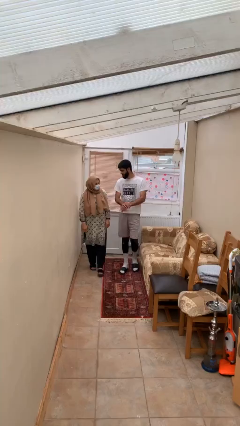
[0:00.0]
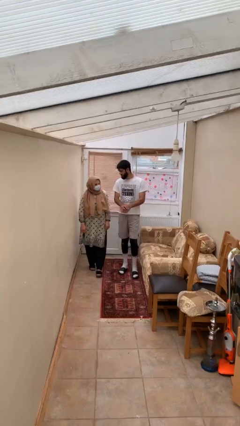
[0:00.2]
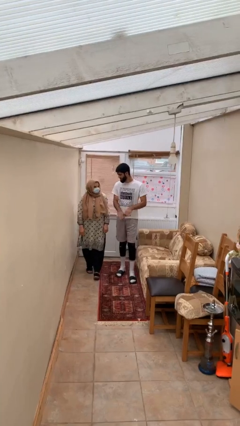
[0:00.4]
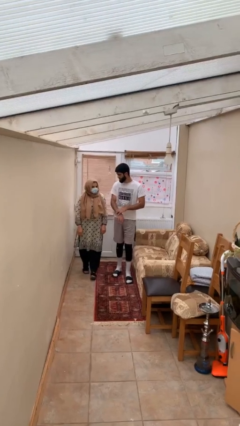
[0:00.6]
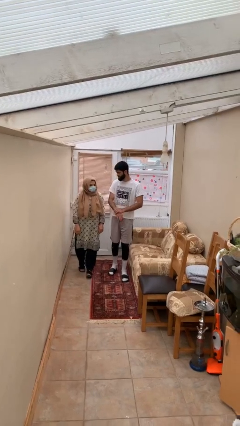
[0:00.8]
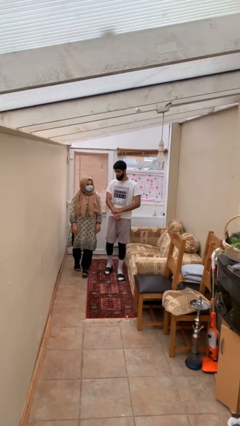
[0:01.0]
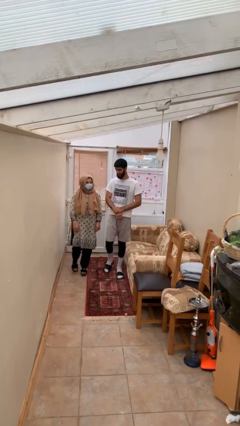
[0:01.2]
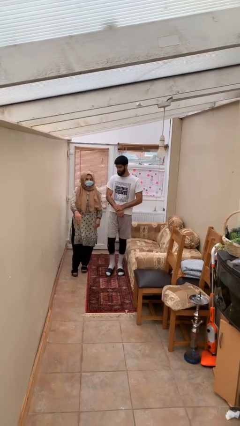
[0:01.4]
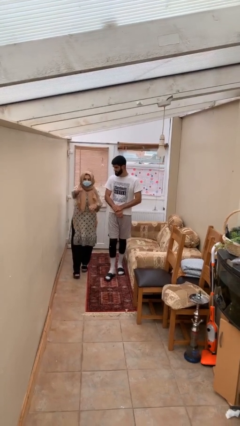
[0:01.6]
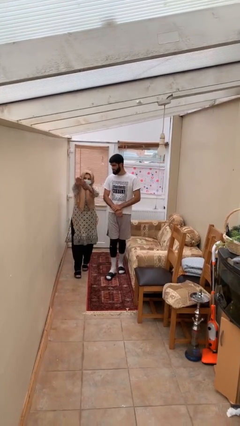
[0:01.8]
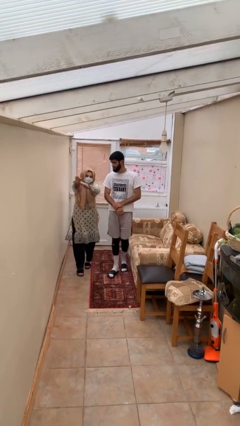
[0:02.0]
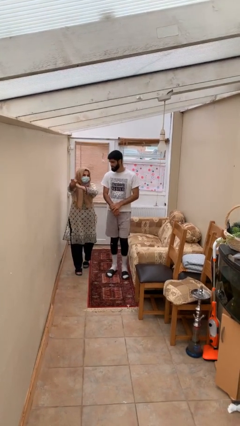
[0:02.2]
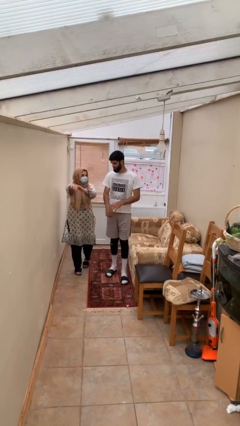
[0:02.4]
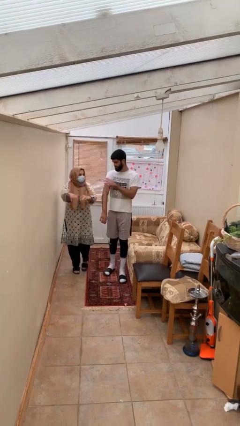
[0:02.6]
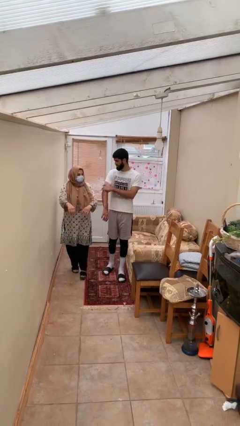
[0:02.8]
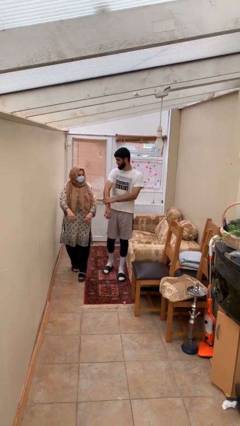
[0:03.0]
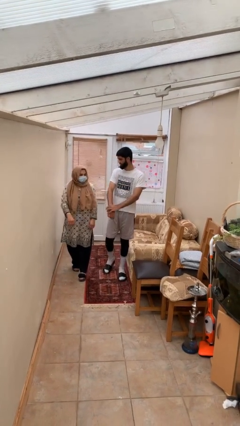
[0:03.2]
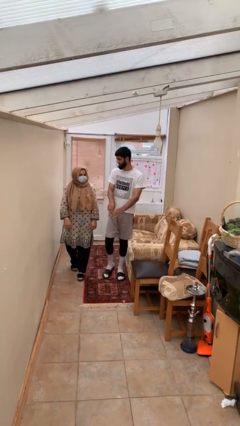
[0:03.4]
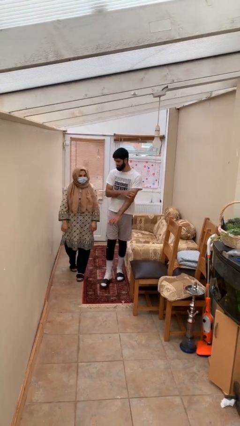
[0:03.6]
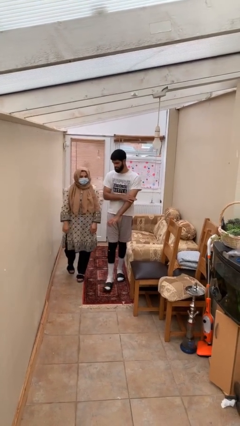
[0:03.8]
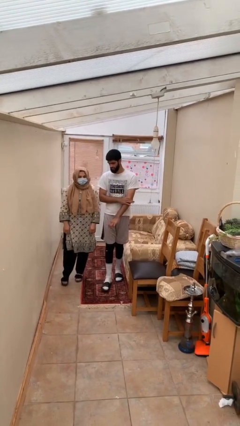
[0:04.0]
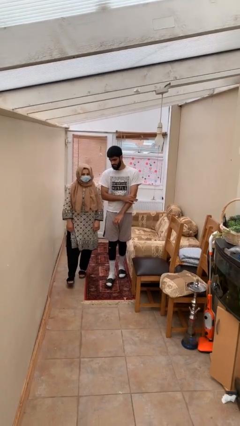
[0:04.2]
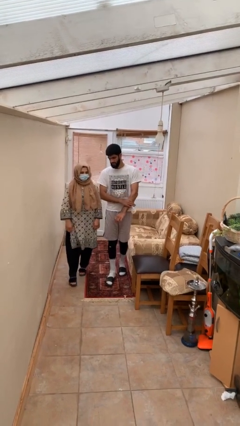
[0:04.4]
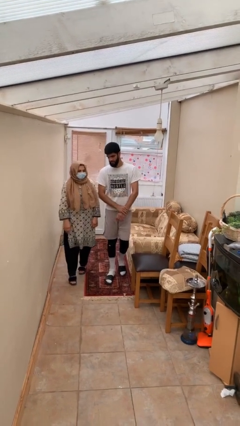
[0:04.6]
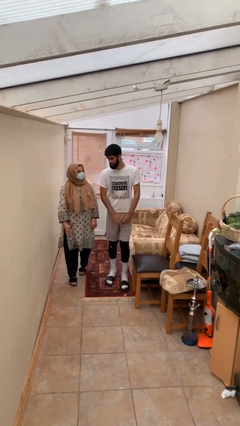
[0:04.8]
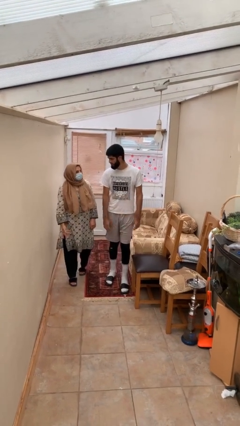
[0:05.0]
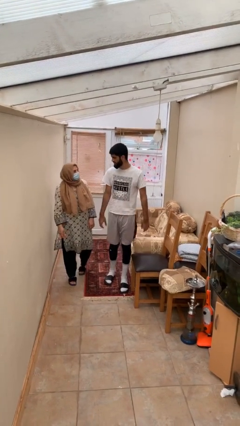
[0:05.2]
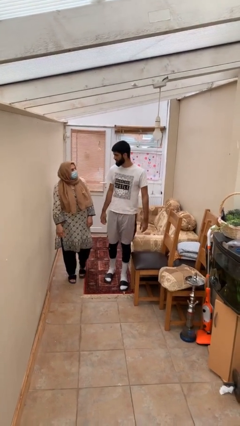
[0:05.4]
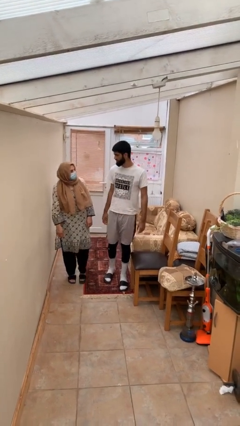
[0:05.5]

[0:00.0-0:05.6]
person talks to person

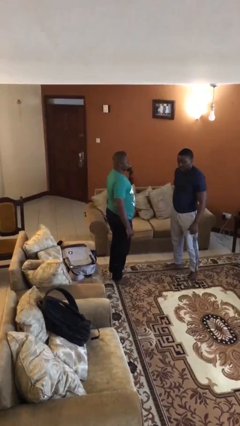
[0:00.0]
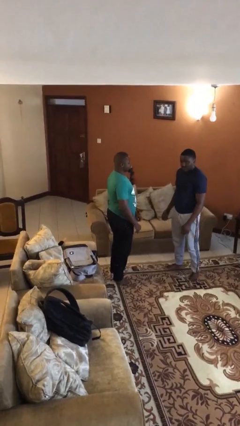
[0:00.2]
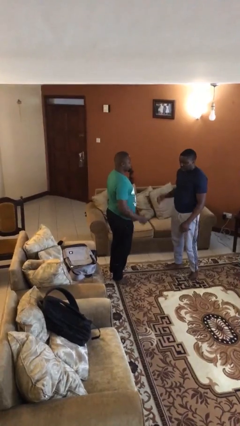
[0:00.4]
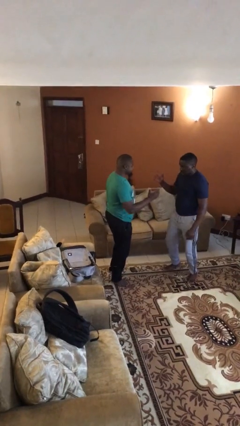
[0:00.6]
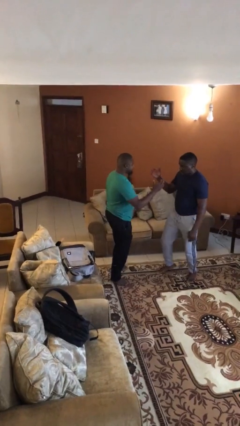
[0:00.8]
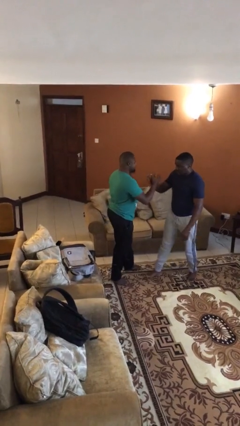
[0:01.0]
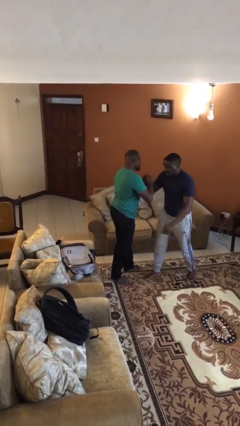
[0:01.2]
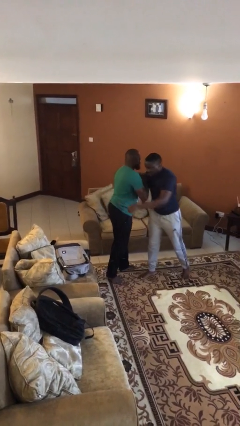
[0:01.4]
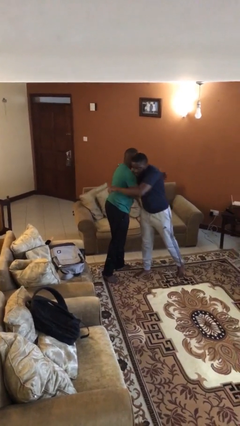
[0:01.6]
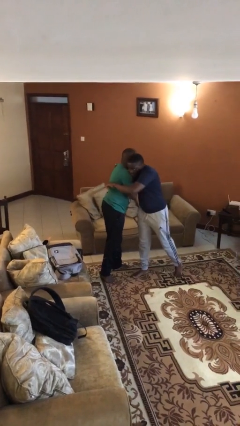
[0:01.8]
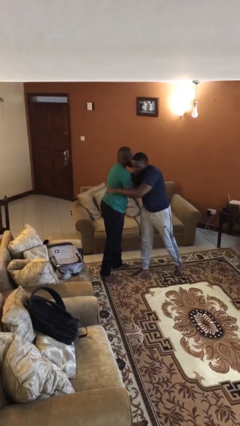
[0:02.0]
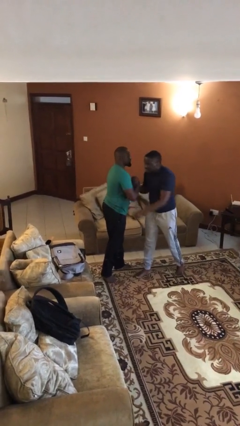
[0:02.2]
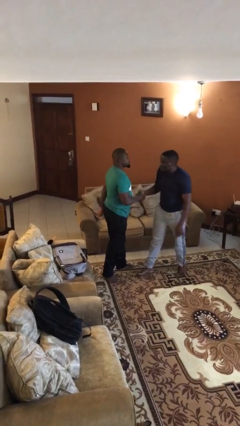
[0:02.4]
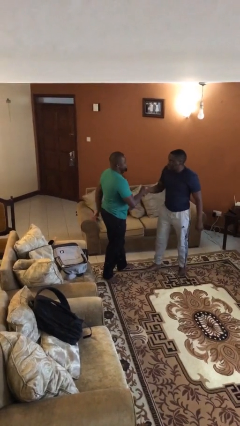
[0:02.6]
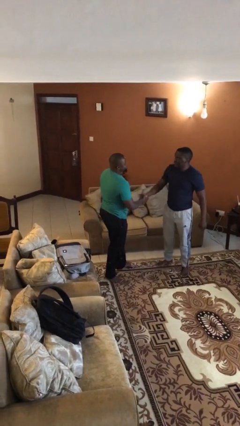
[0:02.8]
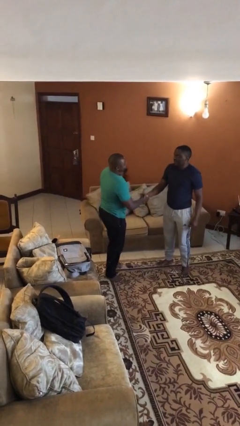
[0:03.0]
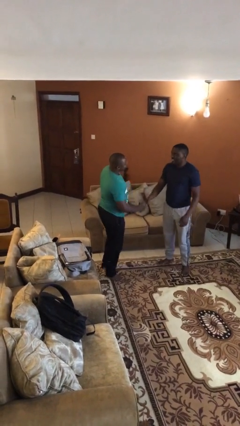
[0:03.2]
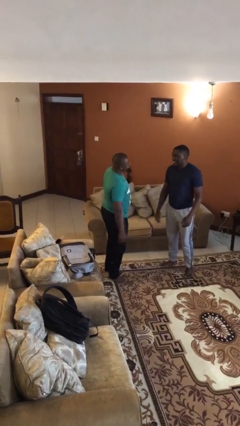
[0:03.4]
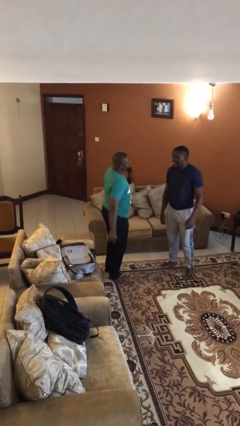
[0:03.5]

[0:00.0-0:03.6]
person embraces person

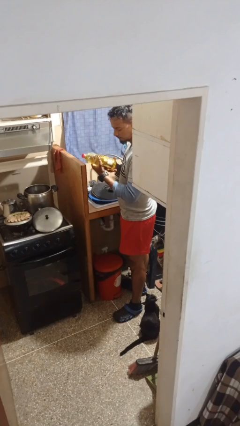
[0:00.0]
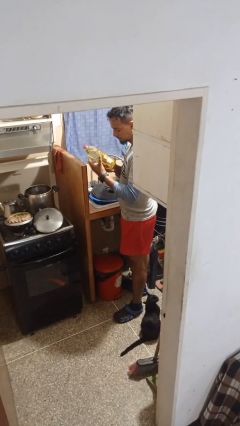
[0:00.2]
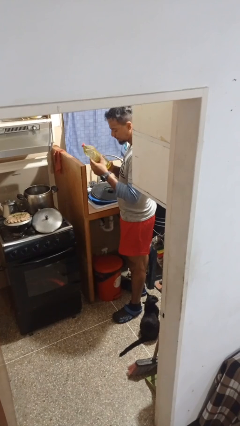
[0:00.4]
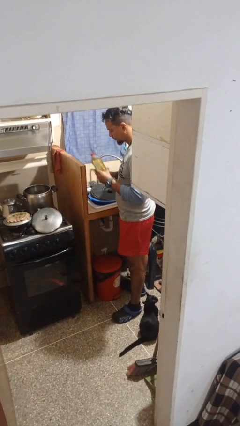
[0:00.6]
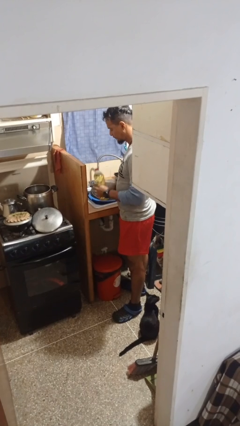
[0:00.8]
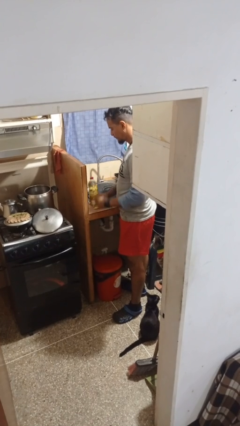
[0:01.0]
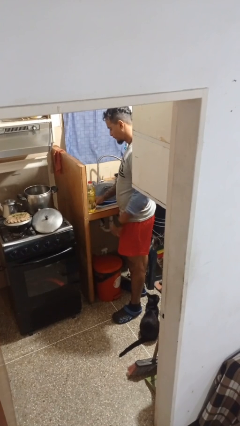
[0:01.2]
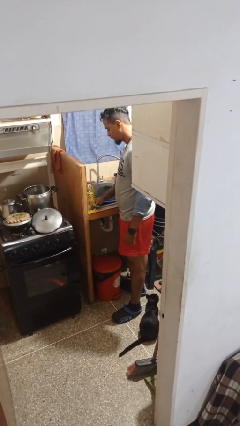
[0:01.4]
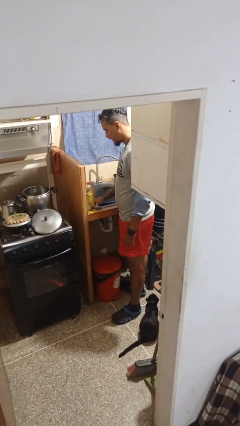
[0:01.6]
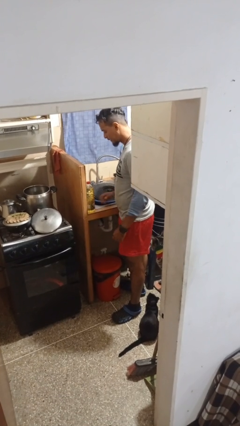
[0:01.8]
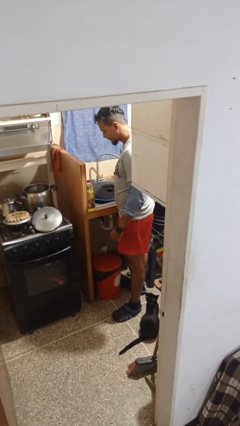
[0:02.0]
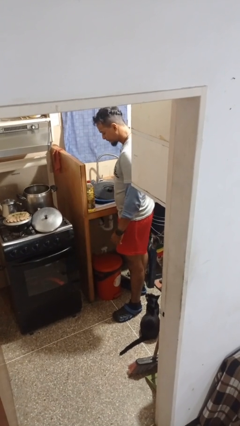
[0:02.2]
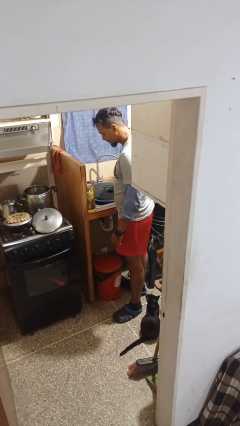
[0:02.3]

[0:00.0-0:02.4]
person puts down object on countertop

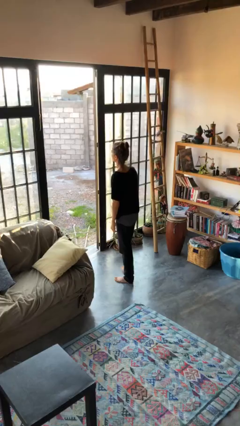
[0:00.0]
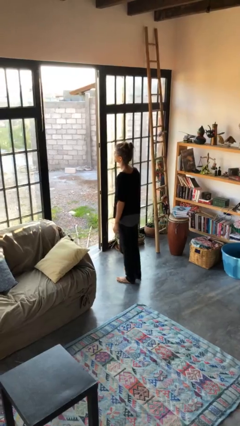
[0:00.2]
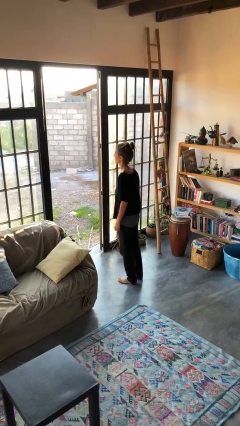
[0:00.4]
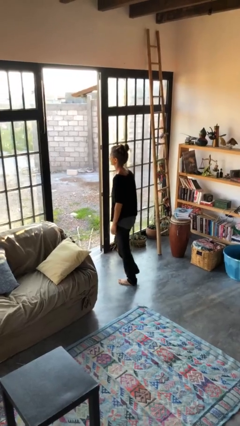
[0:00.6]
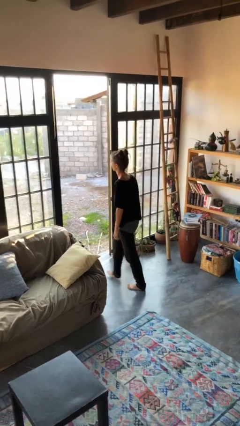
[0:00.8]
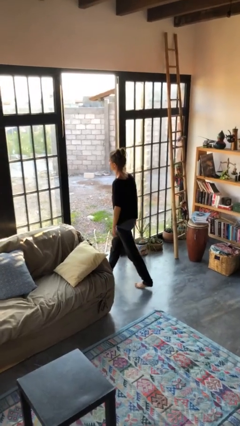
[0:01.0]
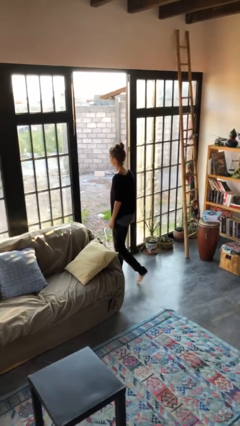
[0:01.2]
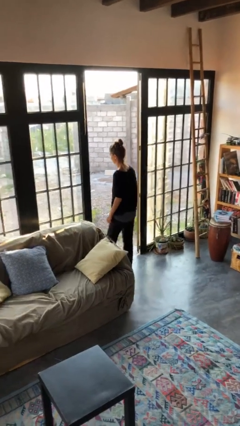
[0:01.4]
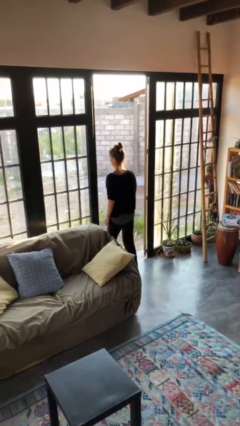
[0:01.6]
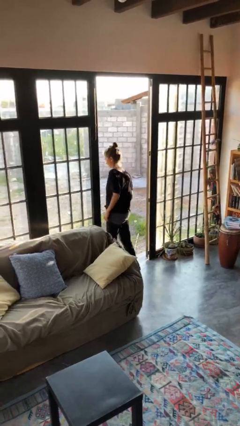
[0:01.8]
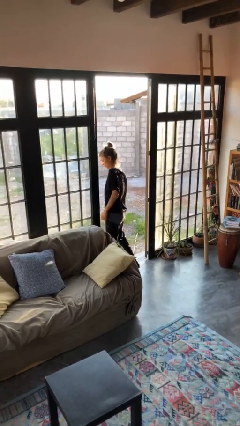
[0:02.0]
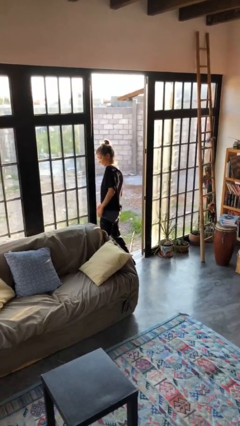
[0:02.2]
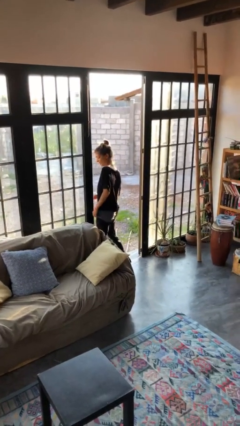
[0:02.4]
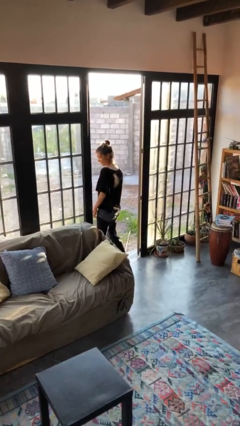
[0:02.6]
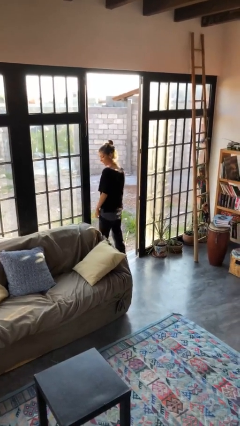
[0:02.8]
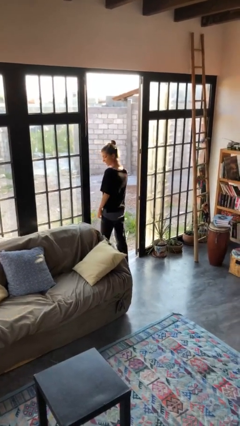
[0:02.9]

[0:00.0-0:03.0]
person bumps into wall

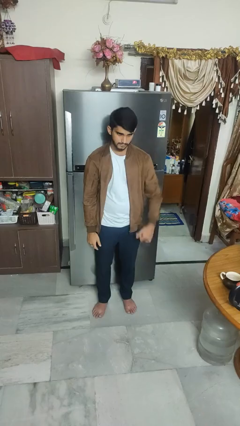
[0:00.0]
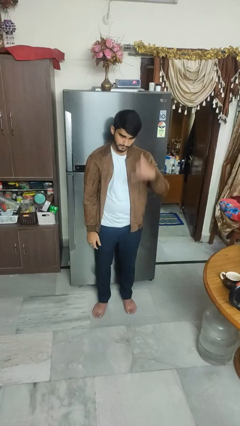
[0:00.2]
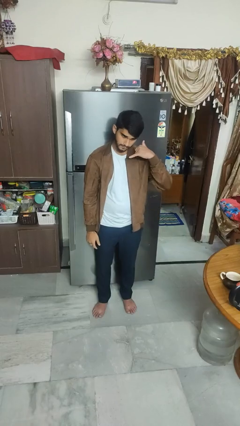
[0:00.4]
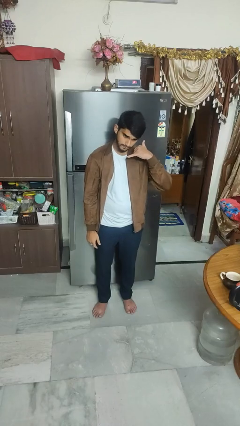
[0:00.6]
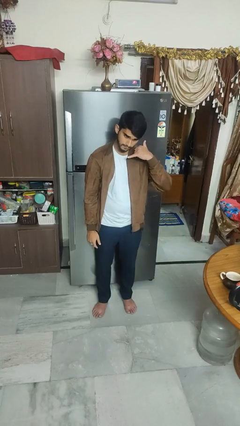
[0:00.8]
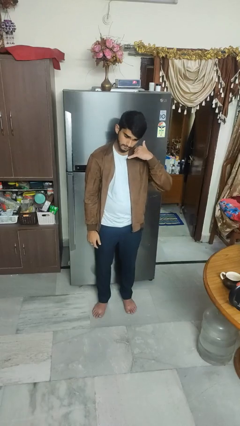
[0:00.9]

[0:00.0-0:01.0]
person gestures call me

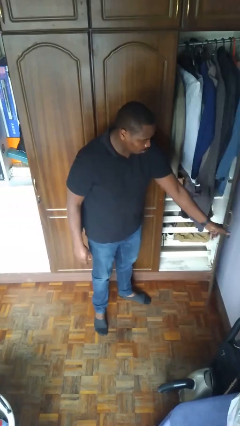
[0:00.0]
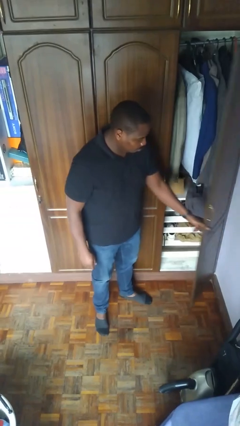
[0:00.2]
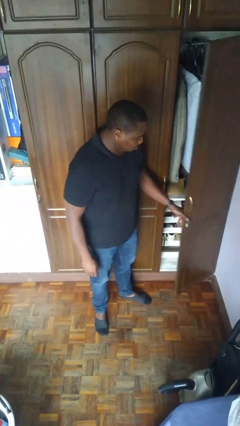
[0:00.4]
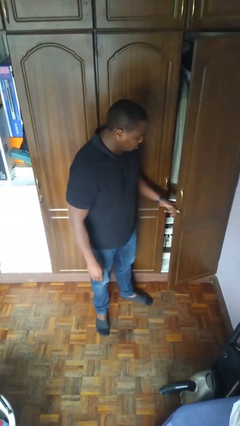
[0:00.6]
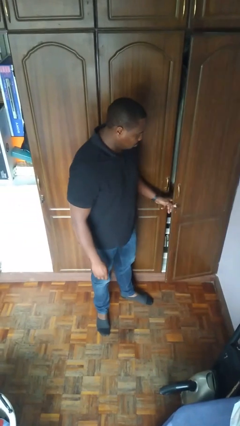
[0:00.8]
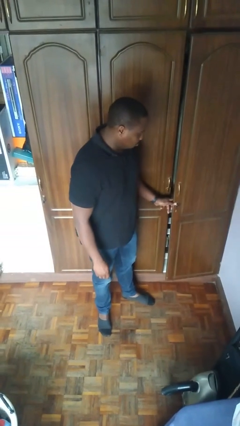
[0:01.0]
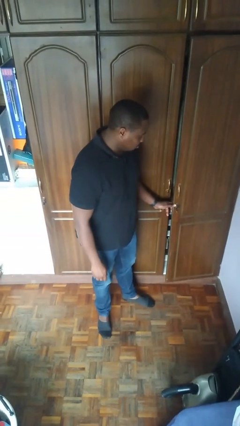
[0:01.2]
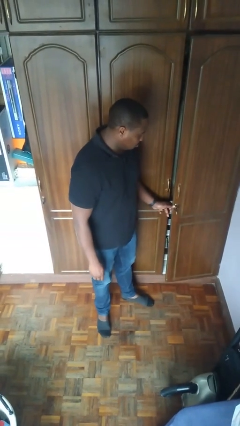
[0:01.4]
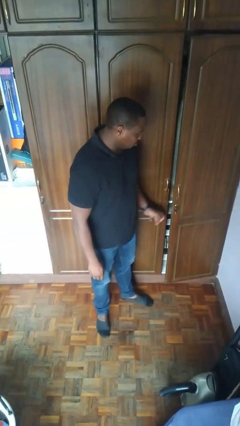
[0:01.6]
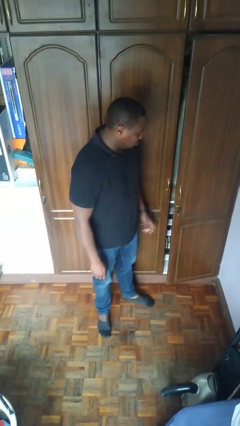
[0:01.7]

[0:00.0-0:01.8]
person closes closet door

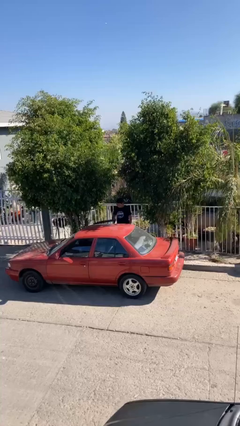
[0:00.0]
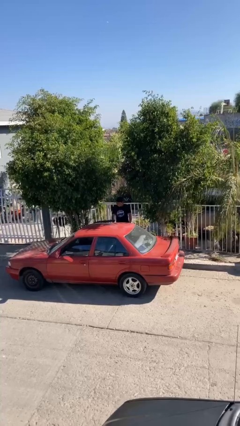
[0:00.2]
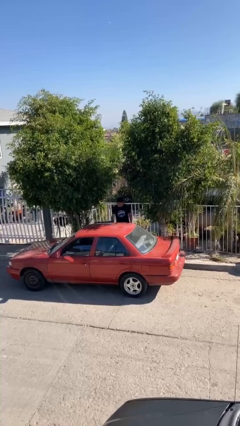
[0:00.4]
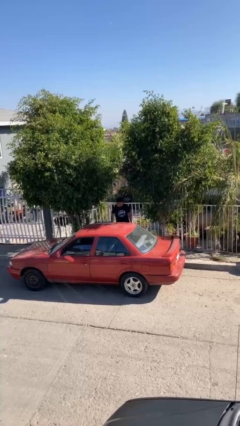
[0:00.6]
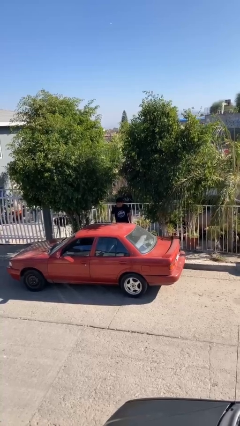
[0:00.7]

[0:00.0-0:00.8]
person closes car door
